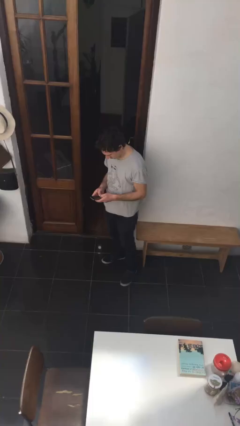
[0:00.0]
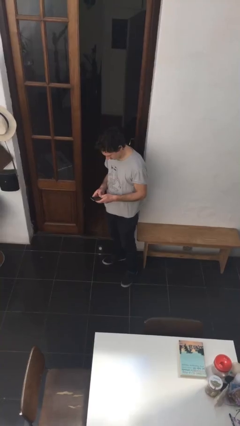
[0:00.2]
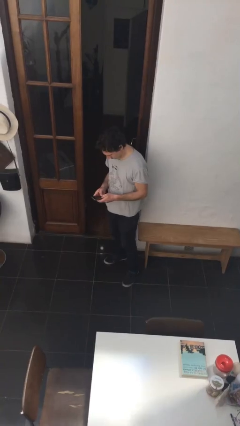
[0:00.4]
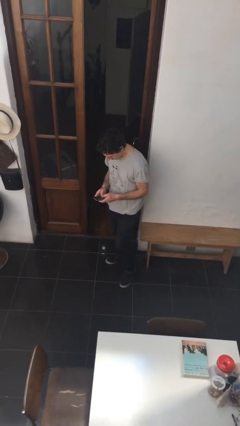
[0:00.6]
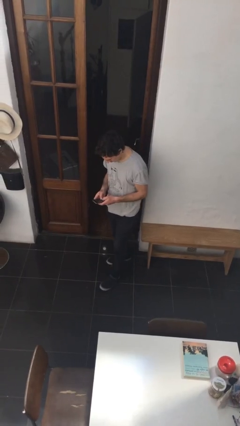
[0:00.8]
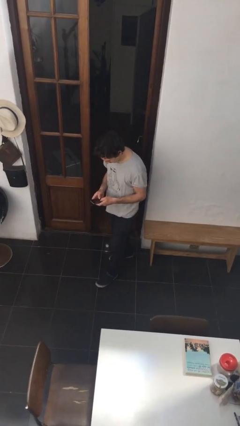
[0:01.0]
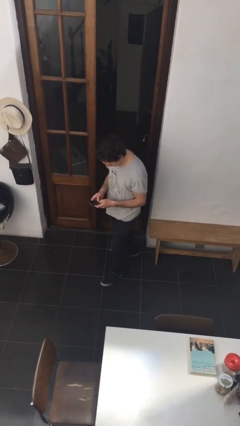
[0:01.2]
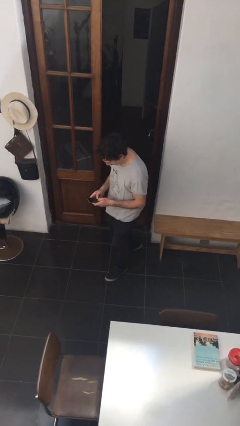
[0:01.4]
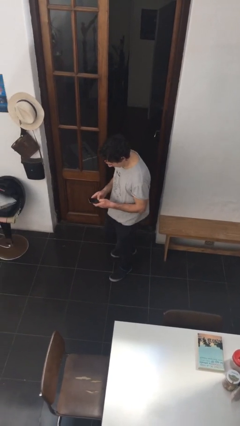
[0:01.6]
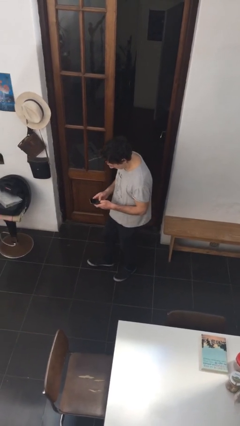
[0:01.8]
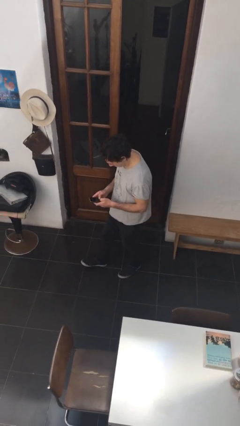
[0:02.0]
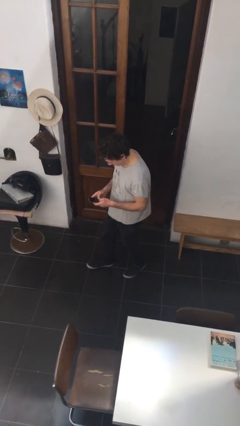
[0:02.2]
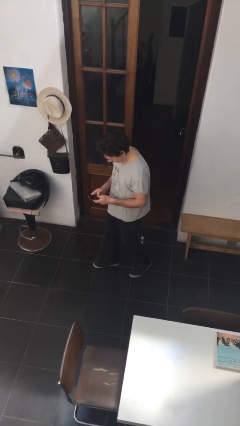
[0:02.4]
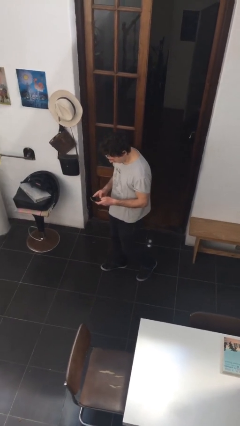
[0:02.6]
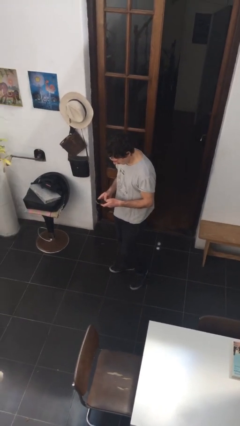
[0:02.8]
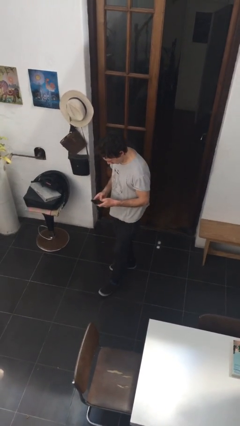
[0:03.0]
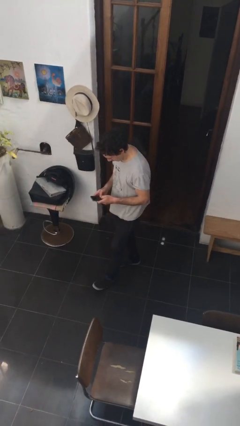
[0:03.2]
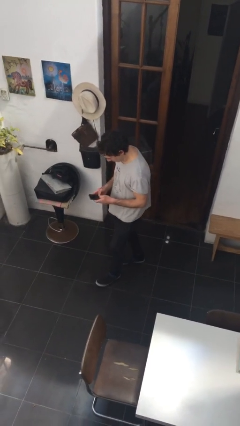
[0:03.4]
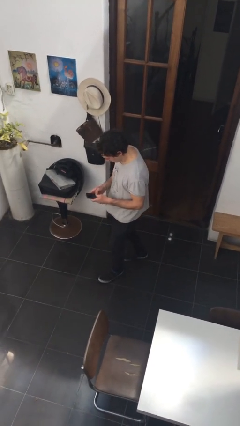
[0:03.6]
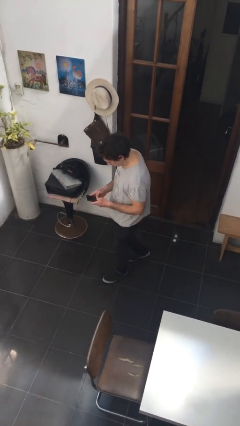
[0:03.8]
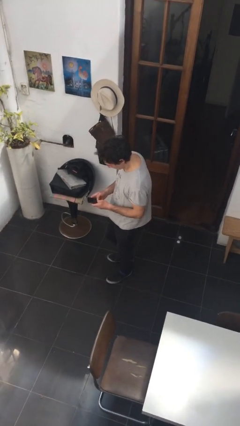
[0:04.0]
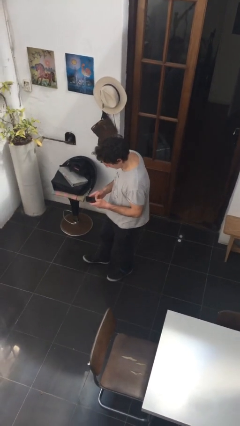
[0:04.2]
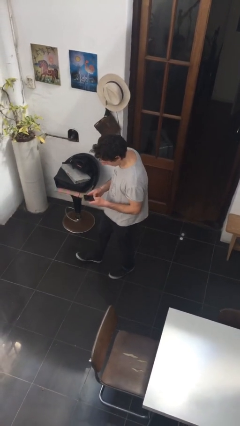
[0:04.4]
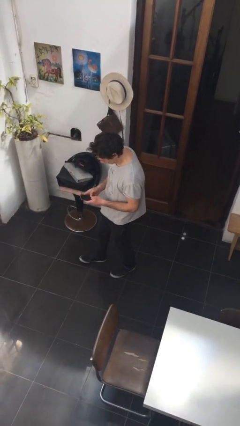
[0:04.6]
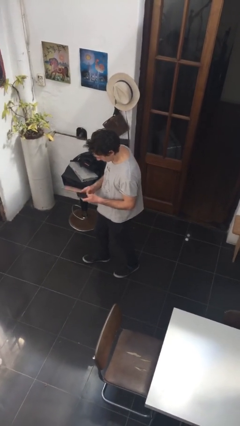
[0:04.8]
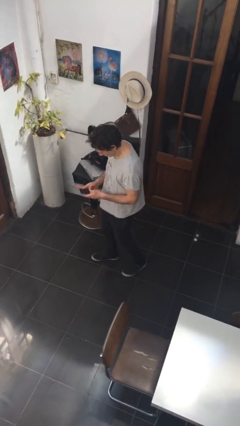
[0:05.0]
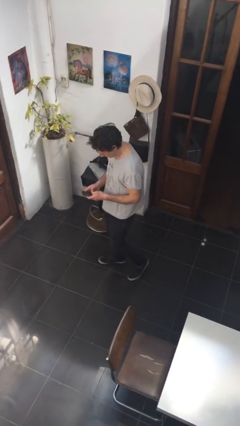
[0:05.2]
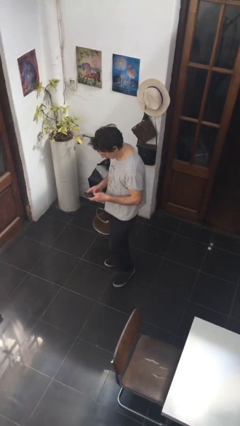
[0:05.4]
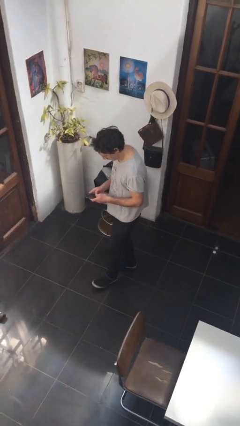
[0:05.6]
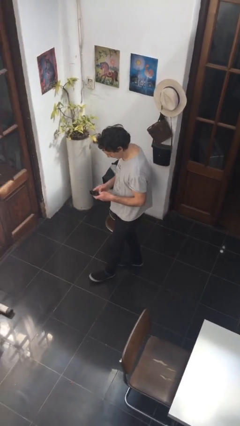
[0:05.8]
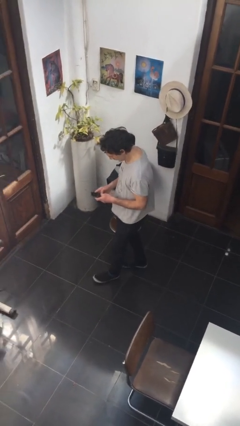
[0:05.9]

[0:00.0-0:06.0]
person texts on phone

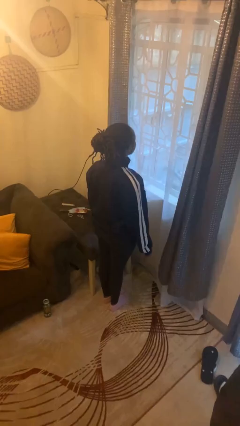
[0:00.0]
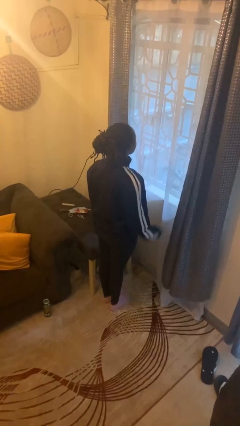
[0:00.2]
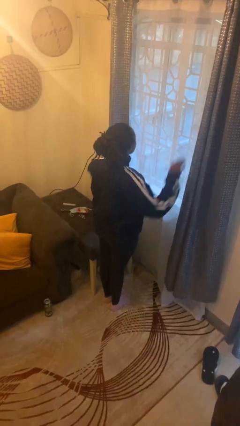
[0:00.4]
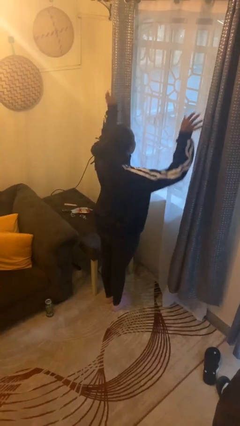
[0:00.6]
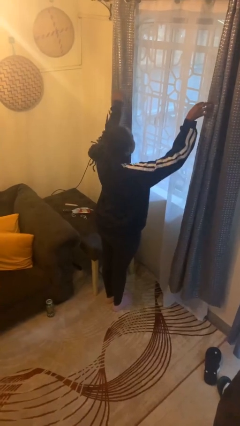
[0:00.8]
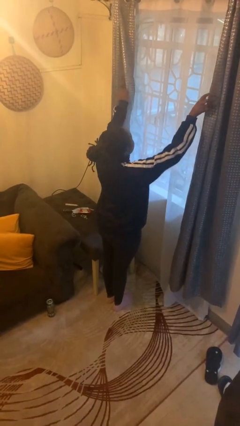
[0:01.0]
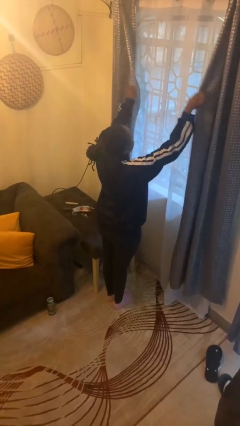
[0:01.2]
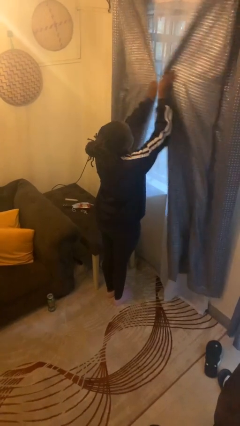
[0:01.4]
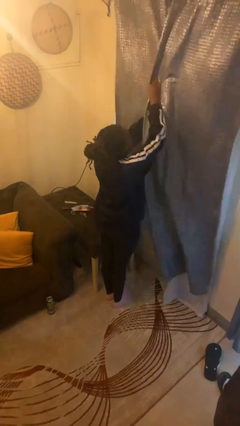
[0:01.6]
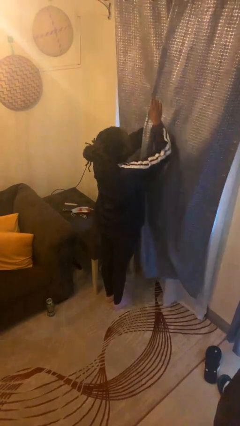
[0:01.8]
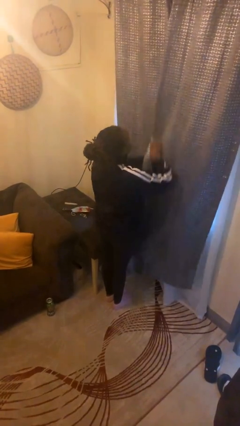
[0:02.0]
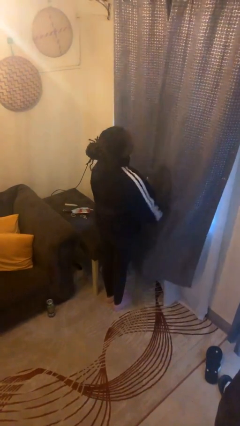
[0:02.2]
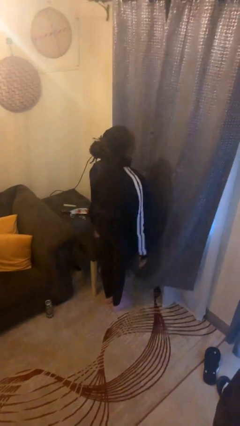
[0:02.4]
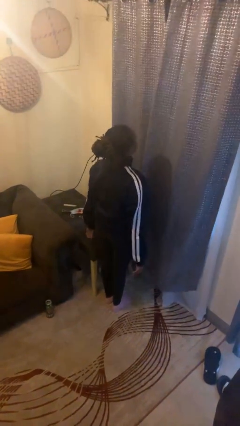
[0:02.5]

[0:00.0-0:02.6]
person closes curtains

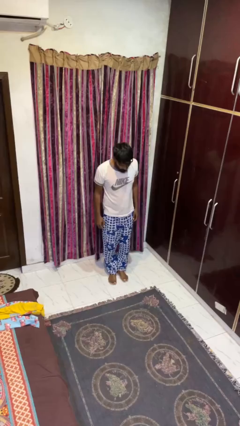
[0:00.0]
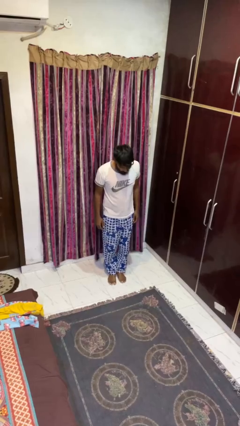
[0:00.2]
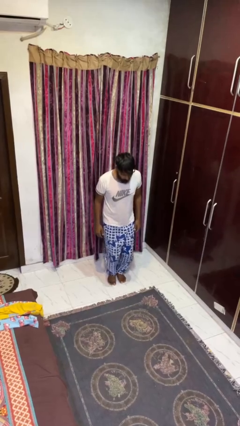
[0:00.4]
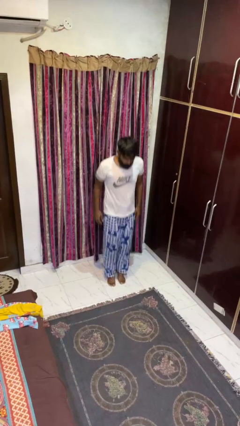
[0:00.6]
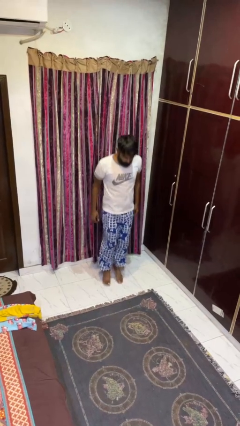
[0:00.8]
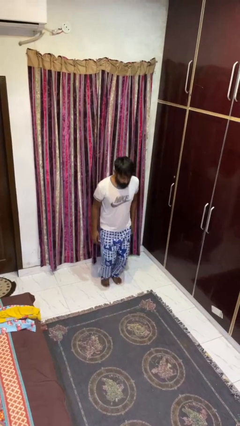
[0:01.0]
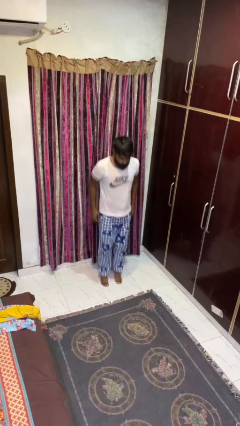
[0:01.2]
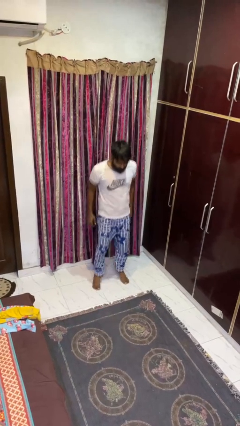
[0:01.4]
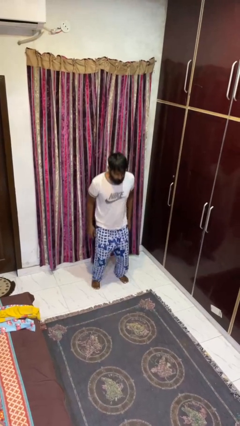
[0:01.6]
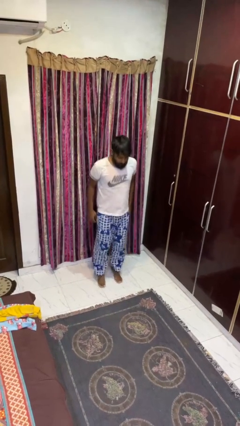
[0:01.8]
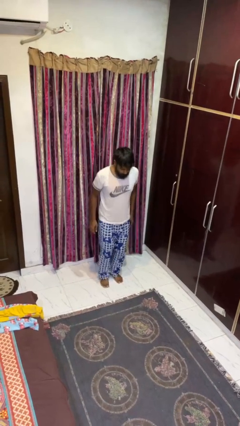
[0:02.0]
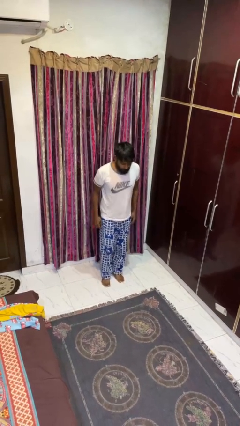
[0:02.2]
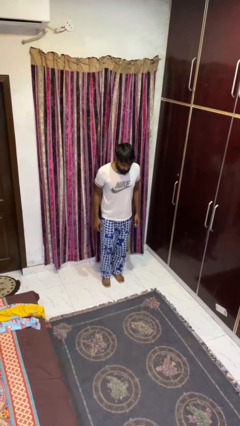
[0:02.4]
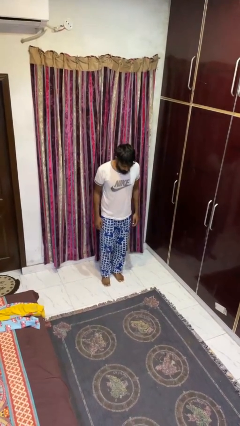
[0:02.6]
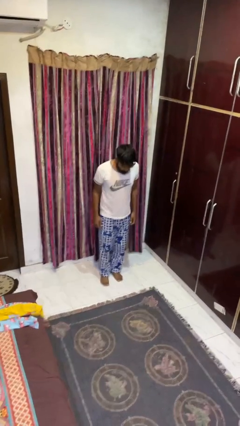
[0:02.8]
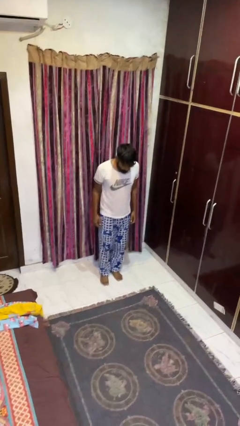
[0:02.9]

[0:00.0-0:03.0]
person jumps

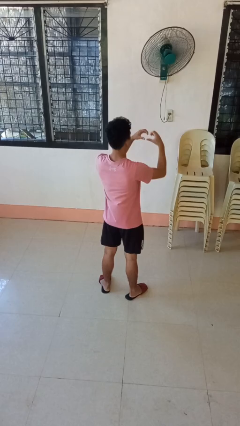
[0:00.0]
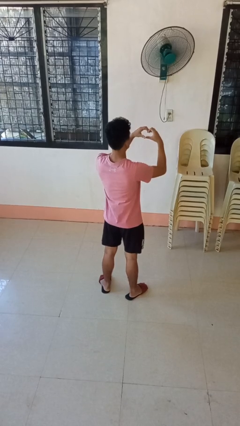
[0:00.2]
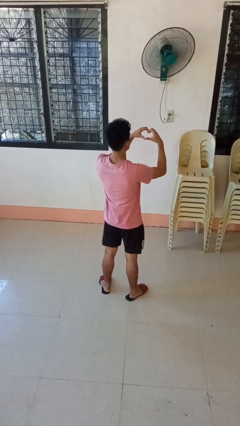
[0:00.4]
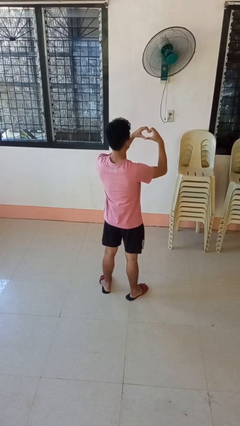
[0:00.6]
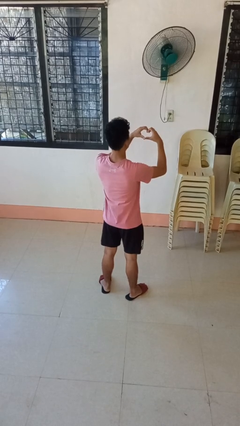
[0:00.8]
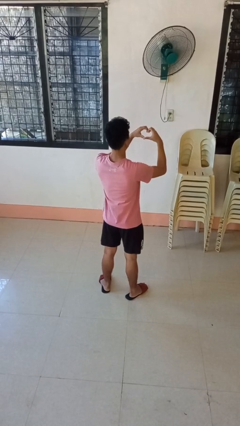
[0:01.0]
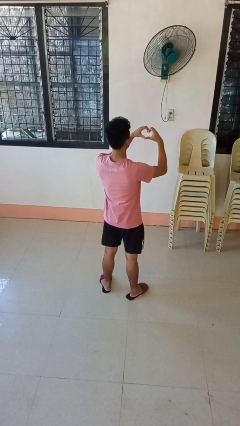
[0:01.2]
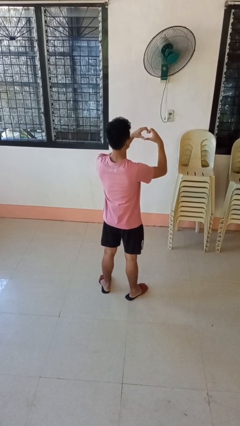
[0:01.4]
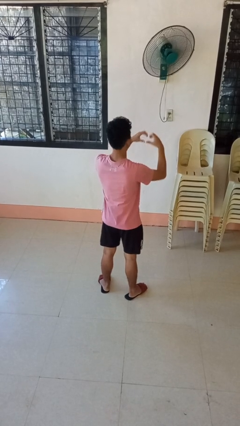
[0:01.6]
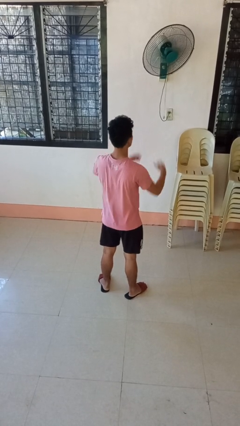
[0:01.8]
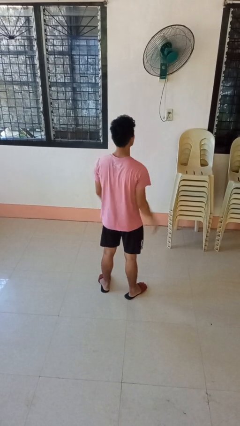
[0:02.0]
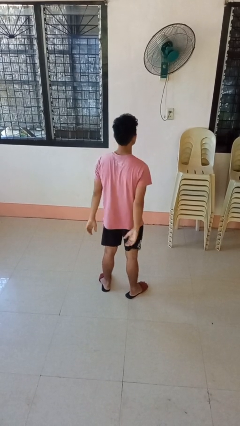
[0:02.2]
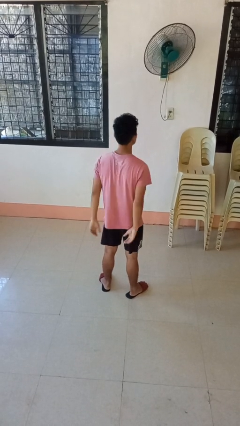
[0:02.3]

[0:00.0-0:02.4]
person gestures heart

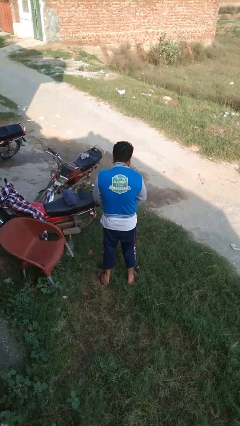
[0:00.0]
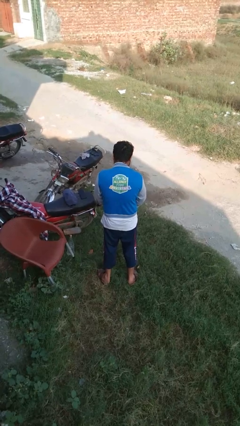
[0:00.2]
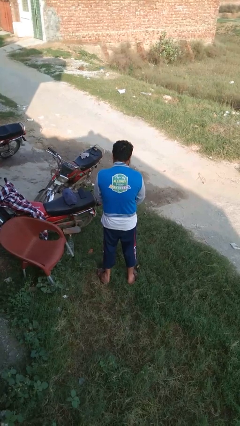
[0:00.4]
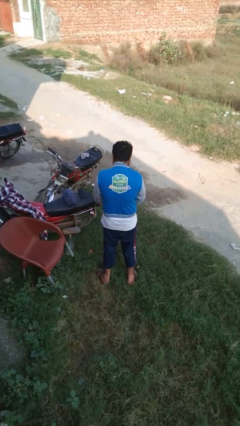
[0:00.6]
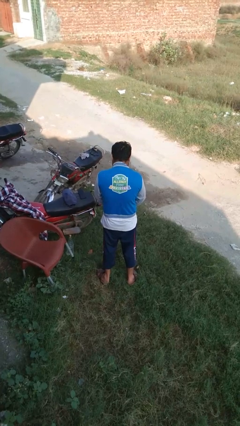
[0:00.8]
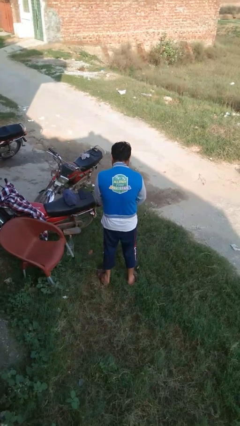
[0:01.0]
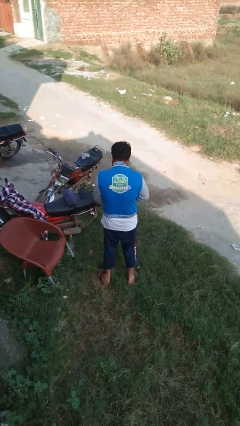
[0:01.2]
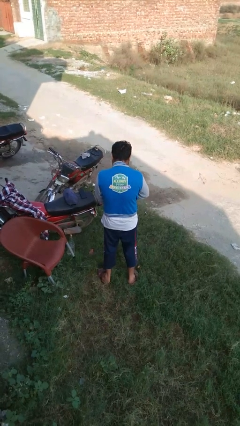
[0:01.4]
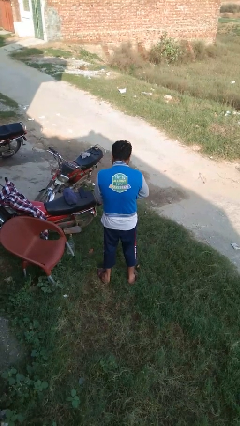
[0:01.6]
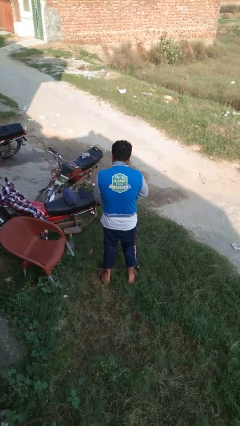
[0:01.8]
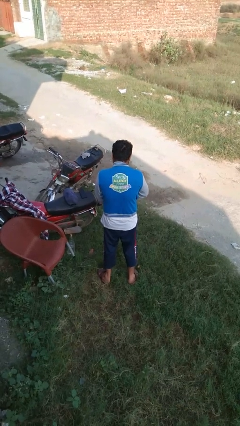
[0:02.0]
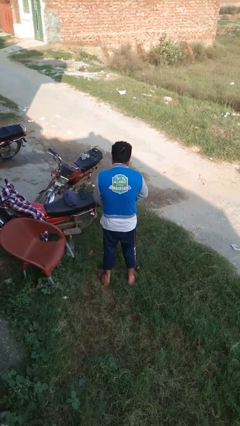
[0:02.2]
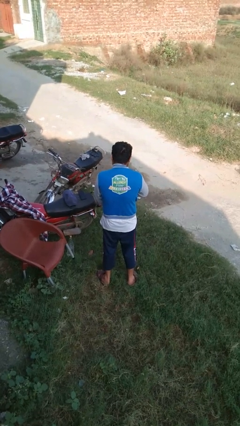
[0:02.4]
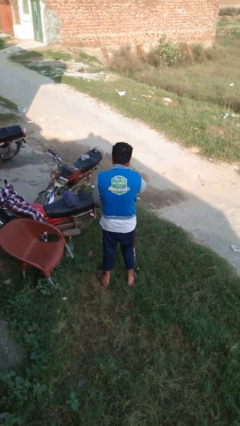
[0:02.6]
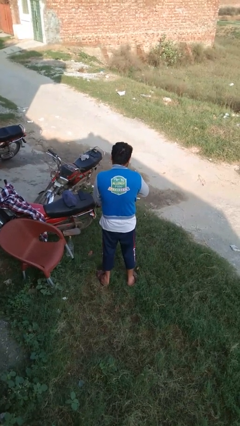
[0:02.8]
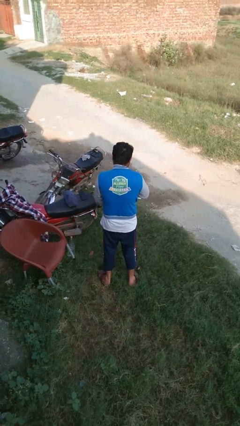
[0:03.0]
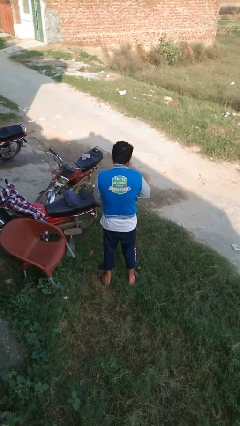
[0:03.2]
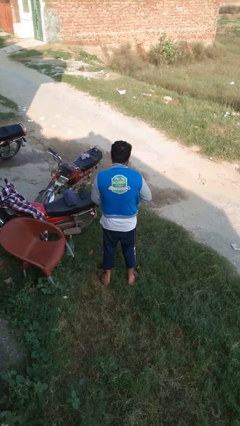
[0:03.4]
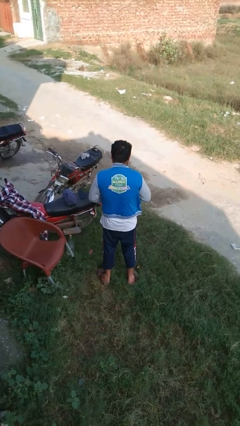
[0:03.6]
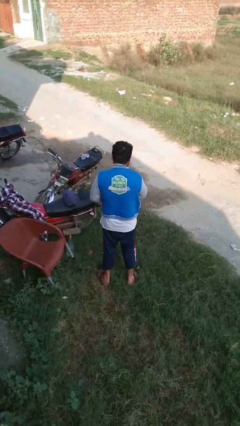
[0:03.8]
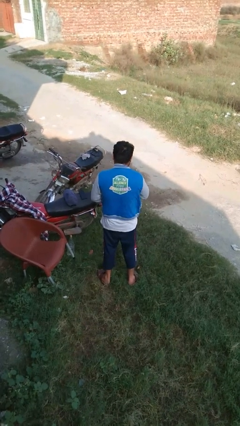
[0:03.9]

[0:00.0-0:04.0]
person unzips jacket
